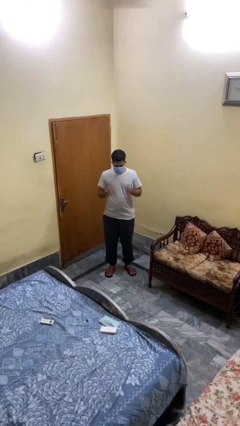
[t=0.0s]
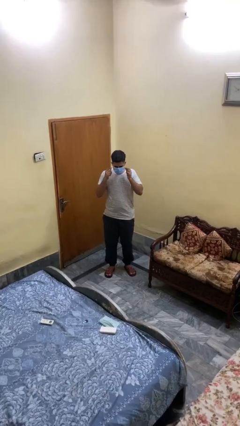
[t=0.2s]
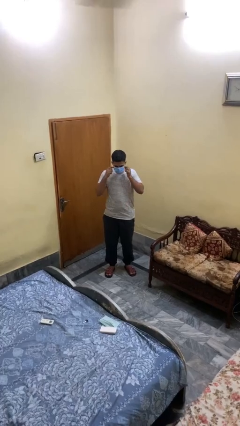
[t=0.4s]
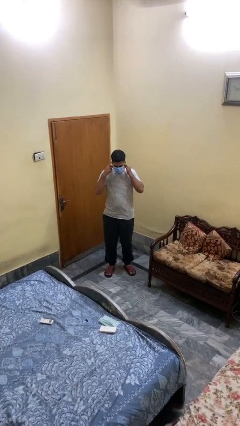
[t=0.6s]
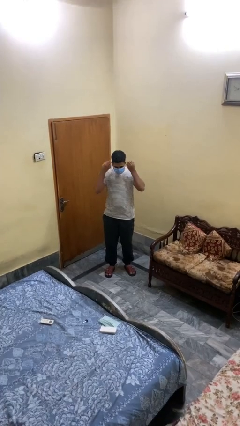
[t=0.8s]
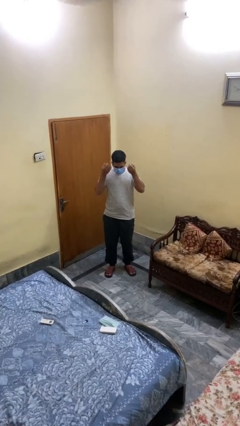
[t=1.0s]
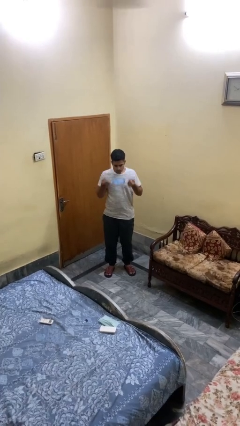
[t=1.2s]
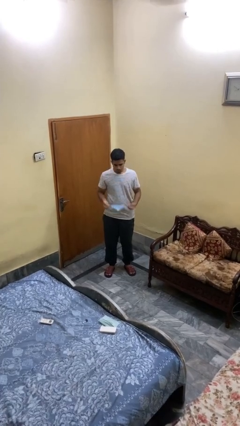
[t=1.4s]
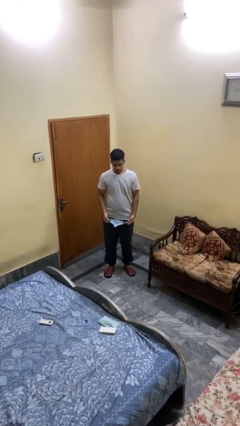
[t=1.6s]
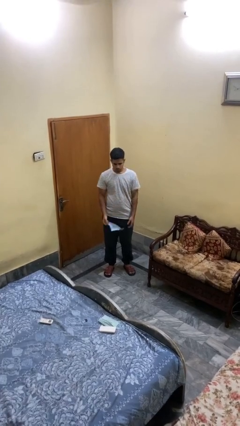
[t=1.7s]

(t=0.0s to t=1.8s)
person takes off facemask

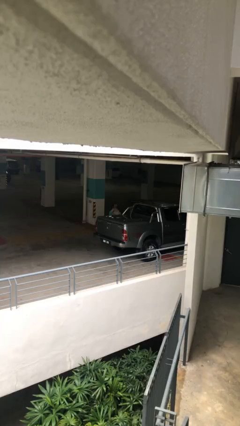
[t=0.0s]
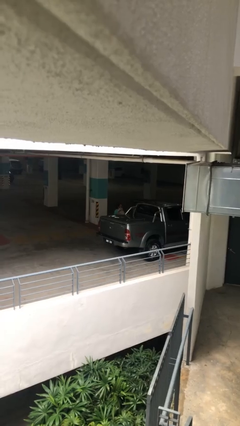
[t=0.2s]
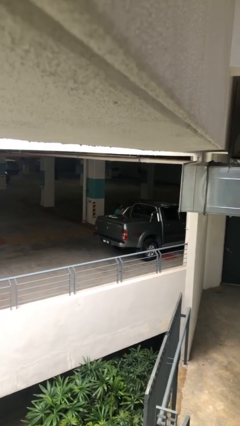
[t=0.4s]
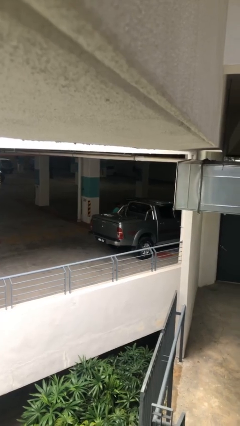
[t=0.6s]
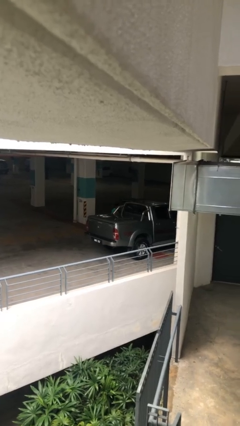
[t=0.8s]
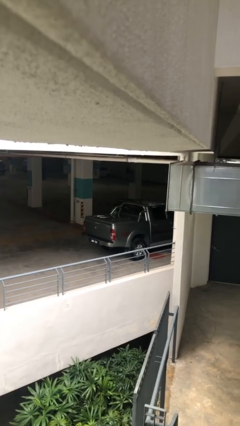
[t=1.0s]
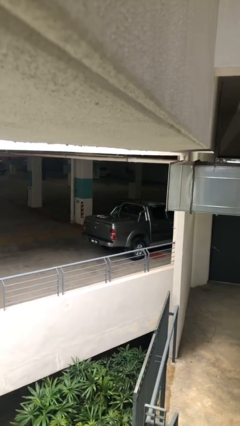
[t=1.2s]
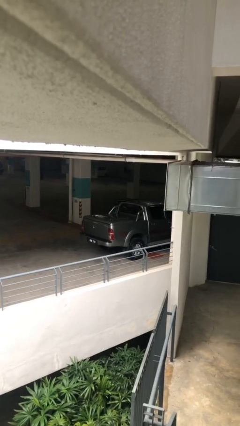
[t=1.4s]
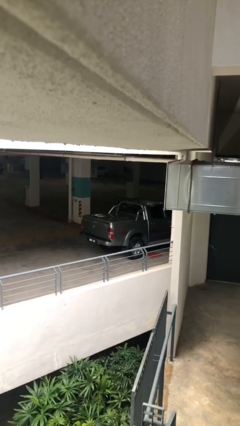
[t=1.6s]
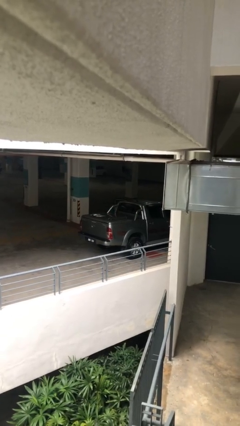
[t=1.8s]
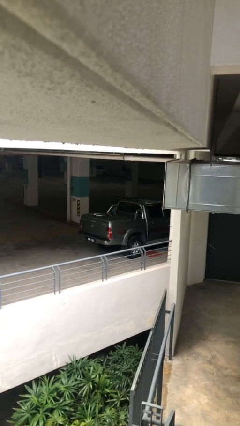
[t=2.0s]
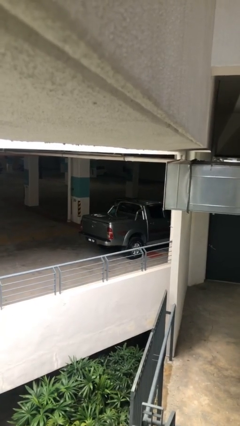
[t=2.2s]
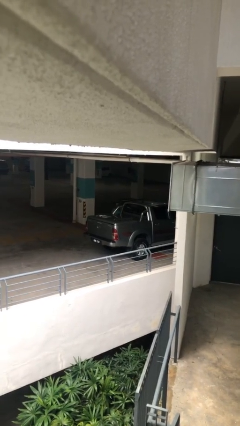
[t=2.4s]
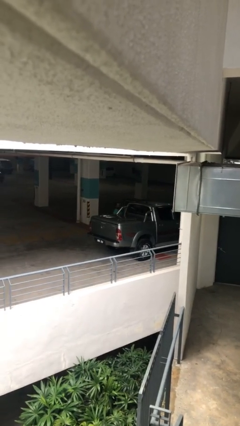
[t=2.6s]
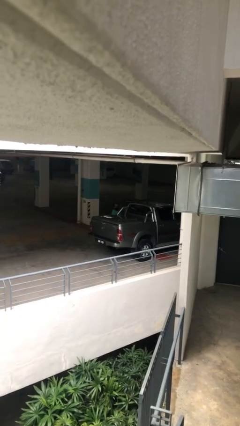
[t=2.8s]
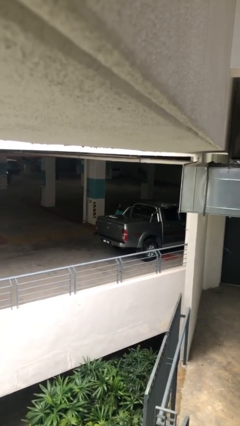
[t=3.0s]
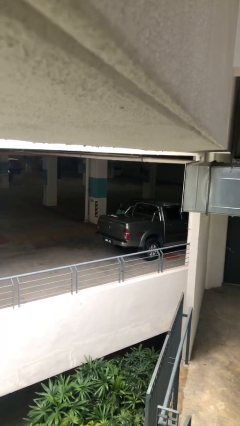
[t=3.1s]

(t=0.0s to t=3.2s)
person loads car

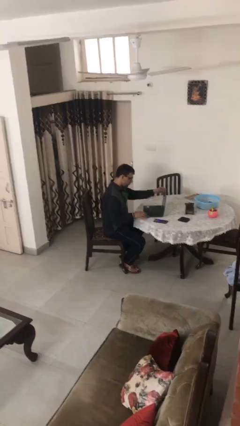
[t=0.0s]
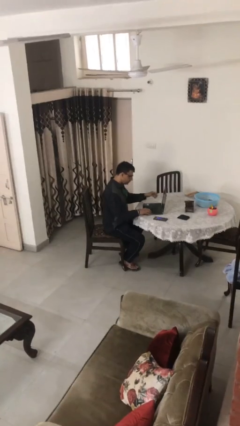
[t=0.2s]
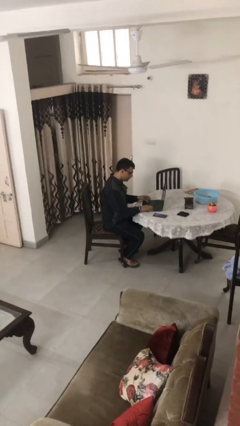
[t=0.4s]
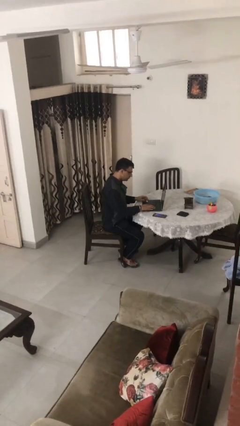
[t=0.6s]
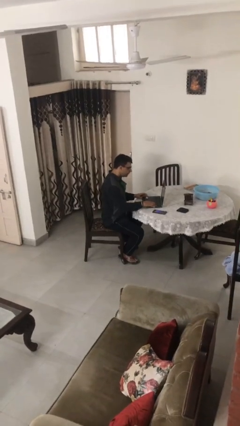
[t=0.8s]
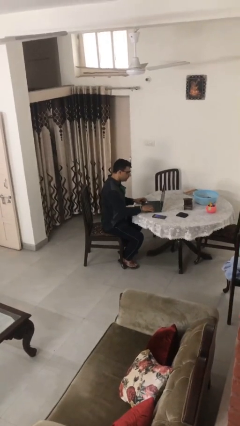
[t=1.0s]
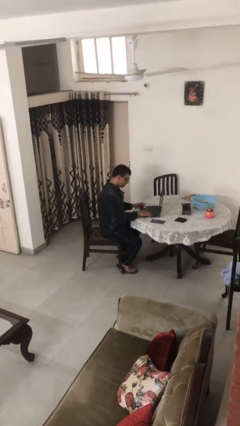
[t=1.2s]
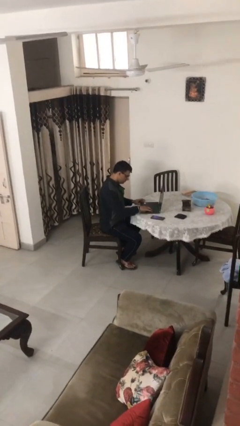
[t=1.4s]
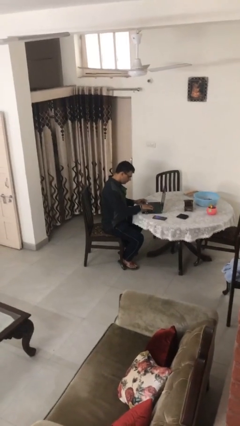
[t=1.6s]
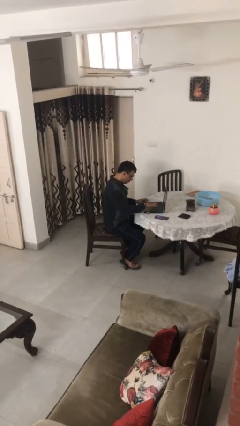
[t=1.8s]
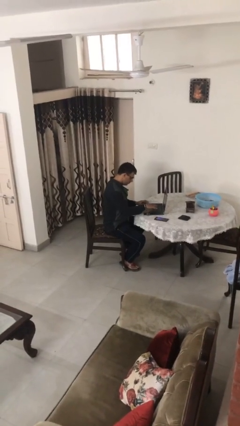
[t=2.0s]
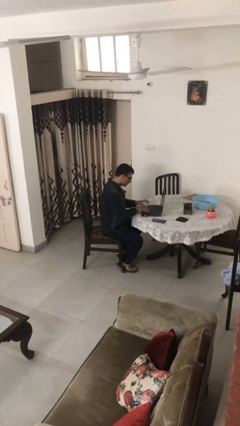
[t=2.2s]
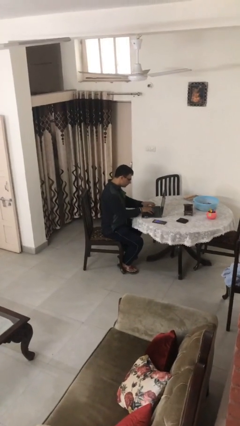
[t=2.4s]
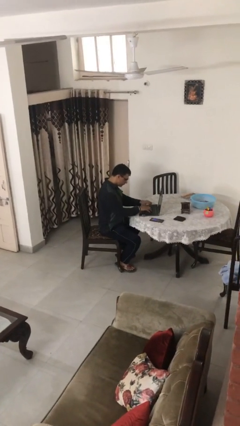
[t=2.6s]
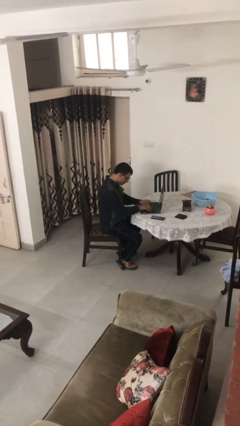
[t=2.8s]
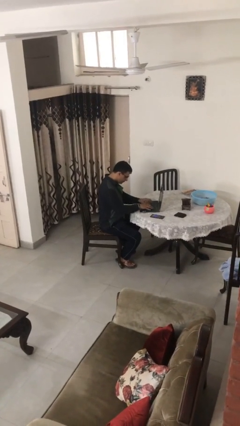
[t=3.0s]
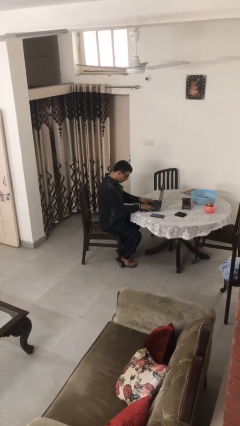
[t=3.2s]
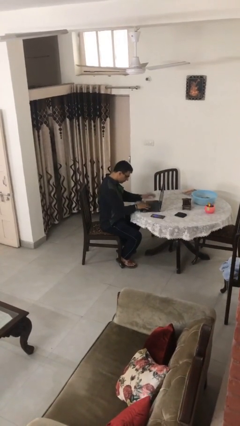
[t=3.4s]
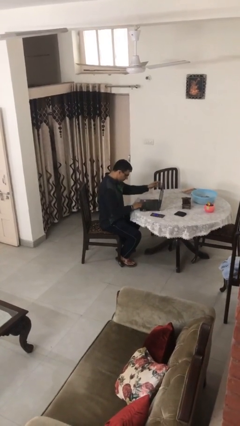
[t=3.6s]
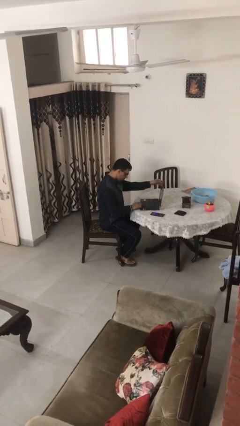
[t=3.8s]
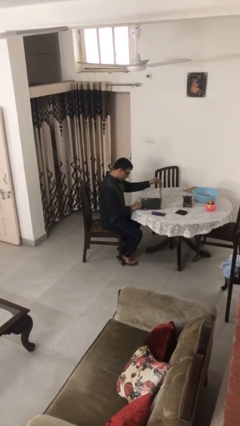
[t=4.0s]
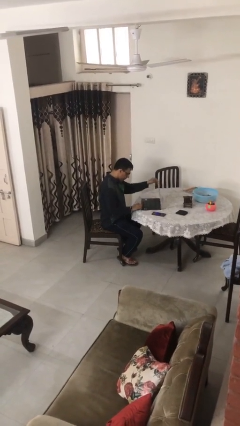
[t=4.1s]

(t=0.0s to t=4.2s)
person interacts with laptop

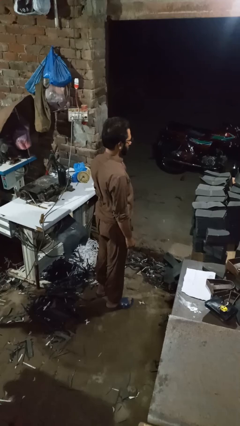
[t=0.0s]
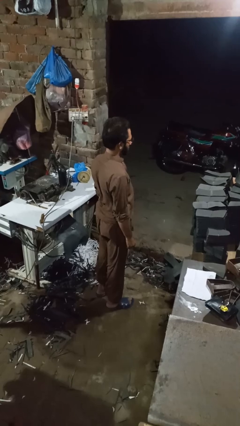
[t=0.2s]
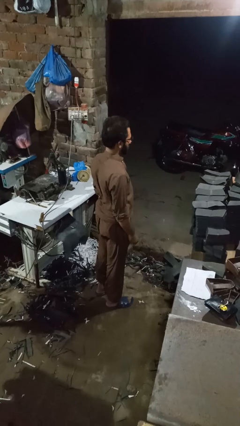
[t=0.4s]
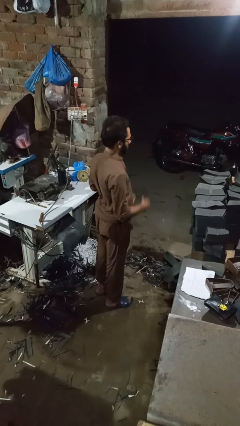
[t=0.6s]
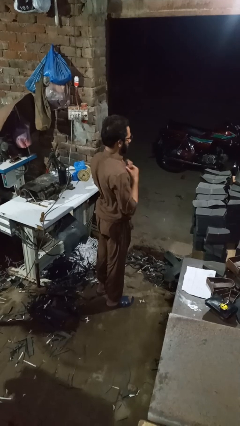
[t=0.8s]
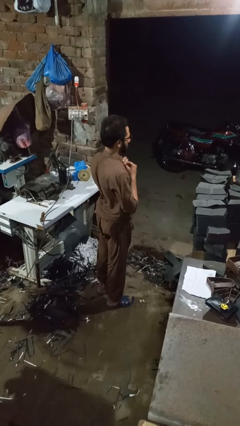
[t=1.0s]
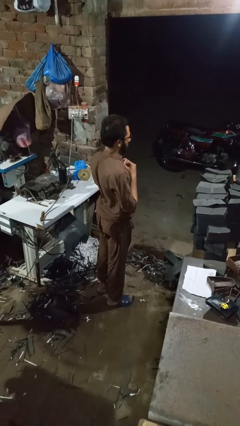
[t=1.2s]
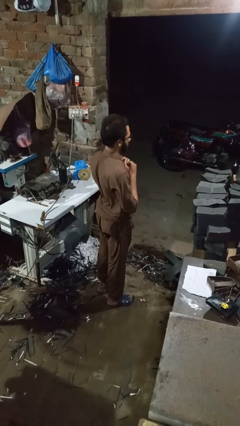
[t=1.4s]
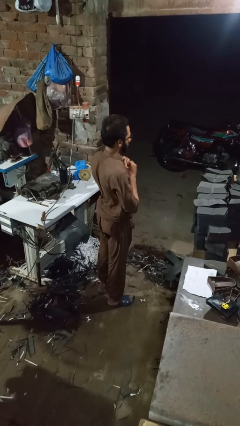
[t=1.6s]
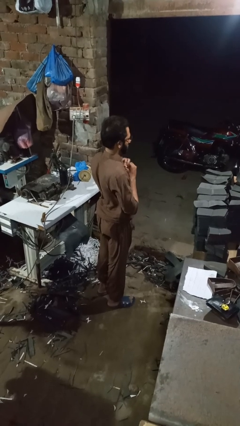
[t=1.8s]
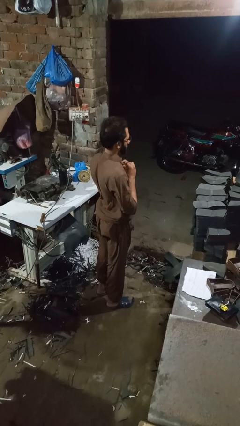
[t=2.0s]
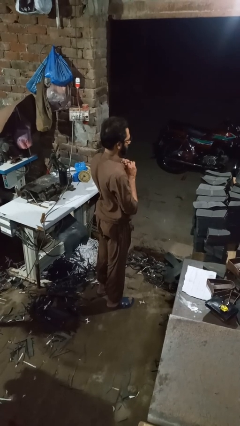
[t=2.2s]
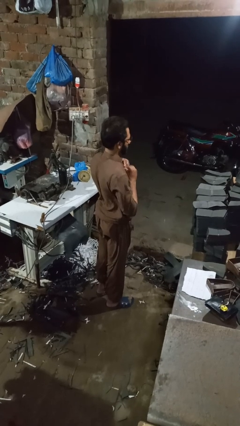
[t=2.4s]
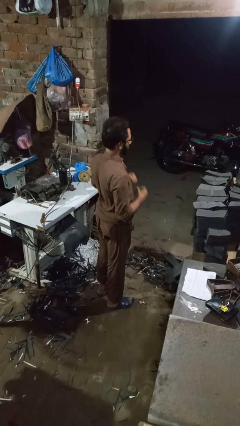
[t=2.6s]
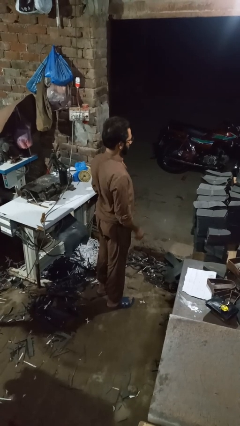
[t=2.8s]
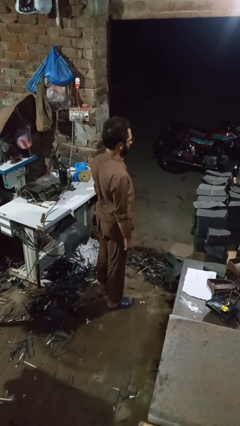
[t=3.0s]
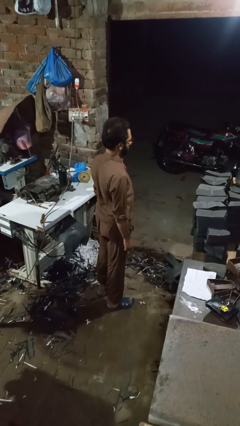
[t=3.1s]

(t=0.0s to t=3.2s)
person buttons shirt

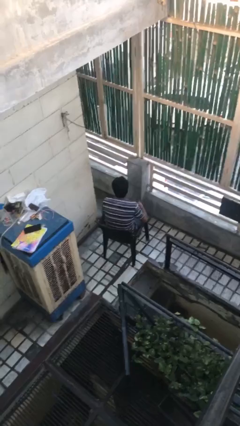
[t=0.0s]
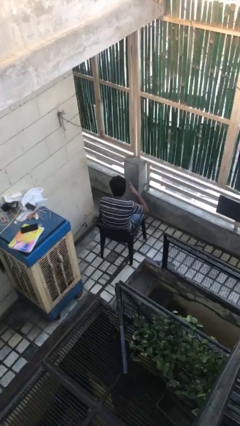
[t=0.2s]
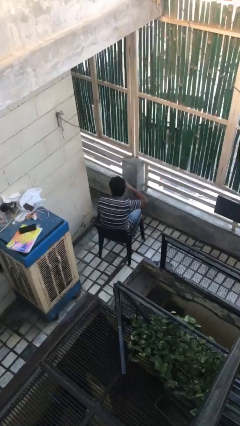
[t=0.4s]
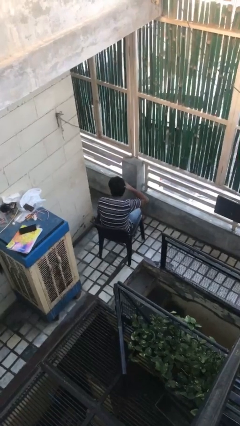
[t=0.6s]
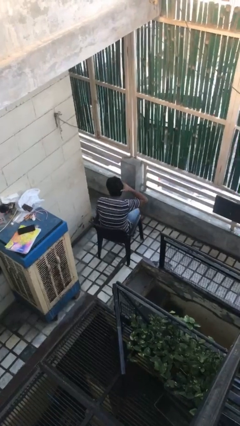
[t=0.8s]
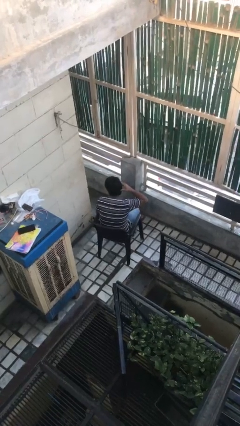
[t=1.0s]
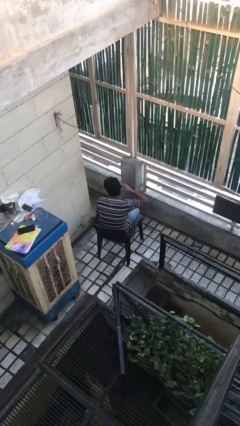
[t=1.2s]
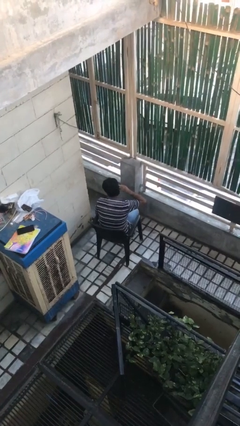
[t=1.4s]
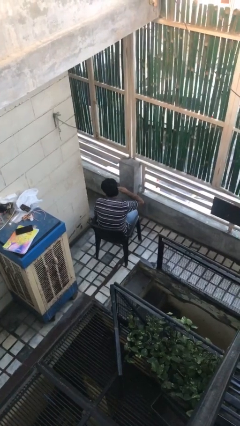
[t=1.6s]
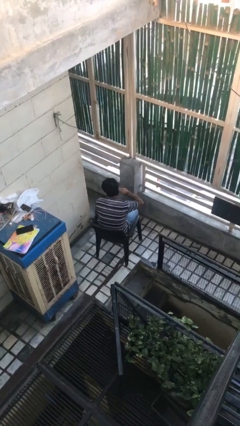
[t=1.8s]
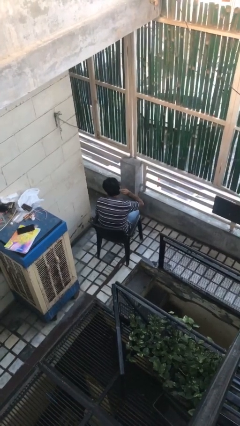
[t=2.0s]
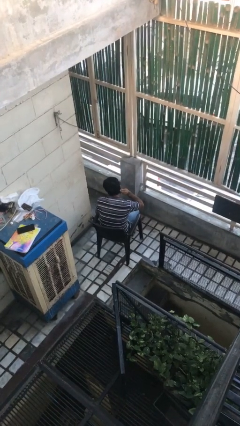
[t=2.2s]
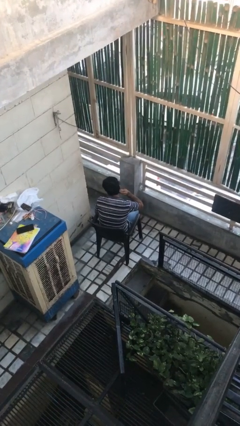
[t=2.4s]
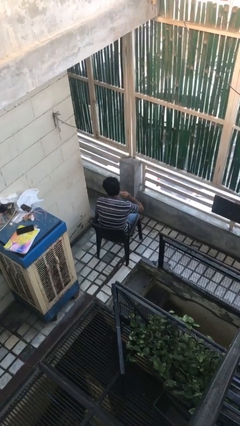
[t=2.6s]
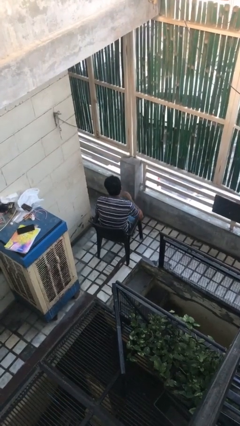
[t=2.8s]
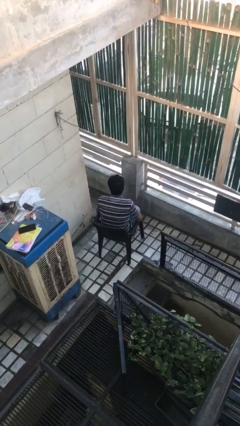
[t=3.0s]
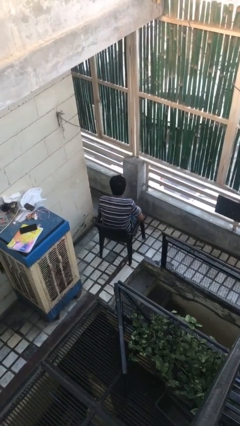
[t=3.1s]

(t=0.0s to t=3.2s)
person strokes hair

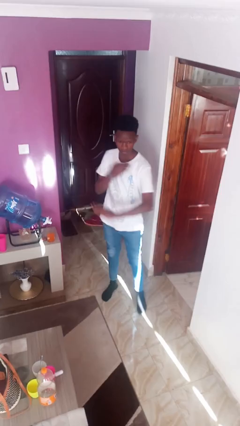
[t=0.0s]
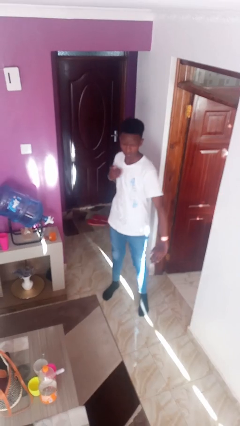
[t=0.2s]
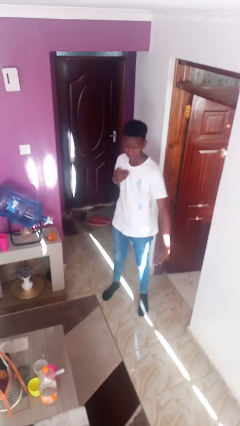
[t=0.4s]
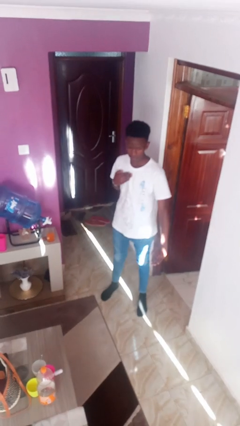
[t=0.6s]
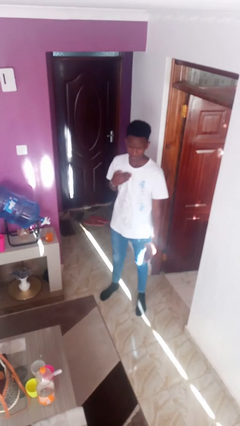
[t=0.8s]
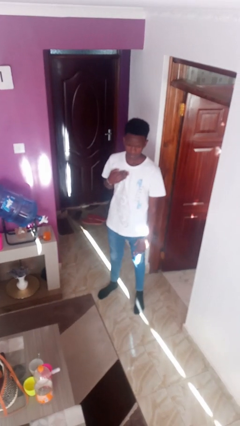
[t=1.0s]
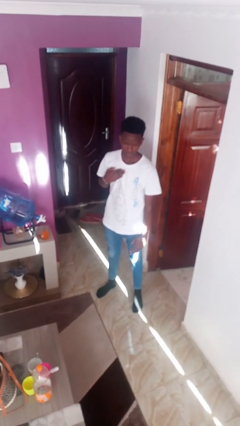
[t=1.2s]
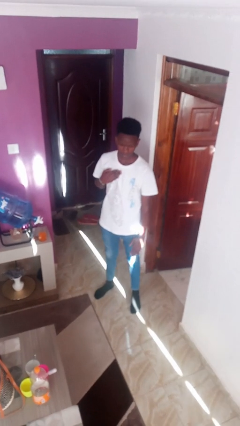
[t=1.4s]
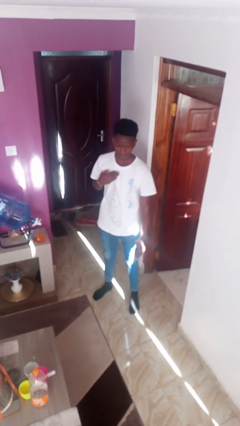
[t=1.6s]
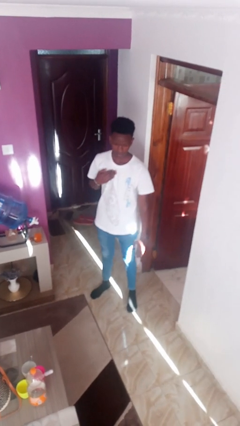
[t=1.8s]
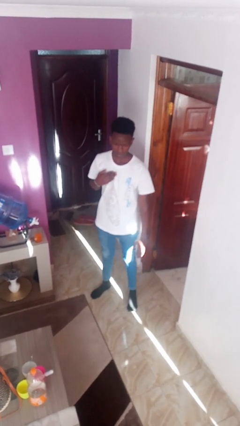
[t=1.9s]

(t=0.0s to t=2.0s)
person karate chop
